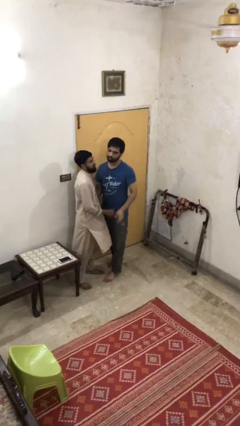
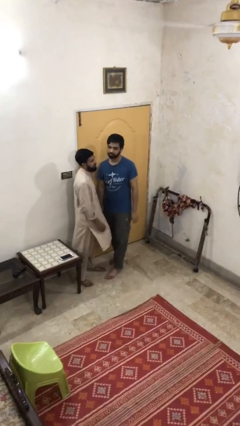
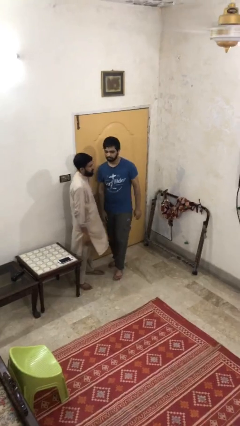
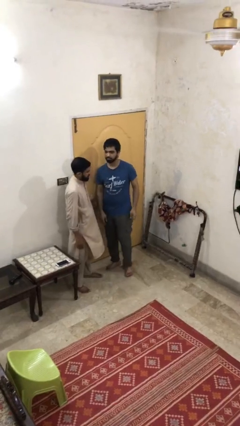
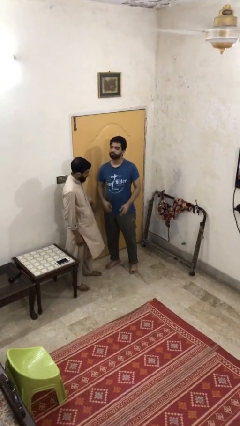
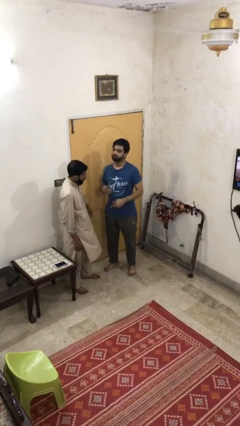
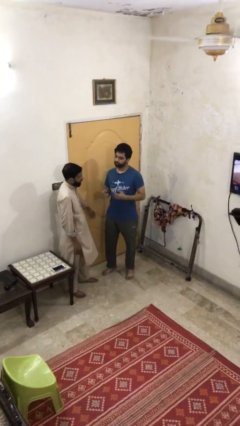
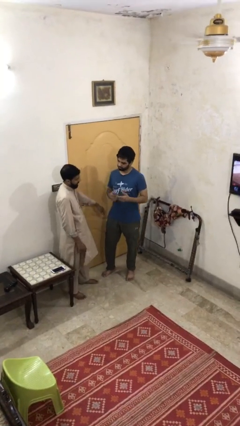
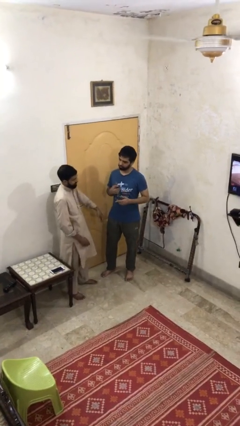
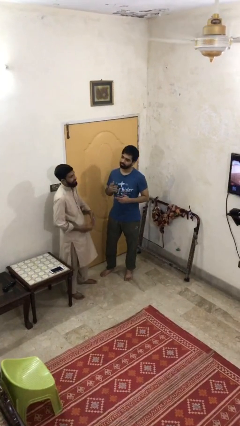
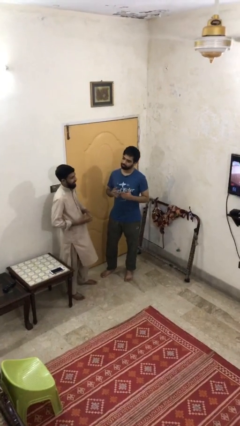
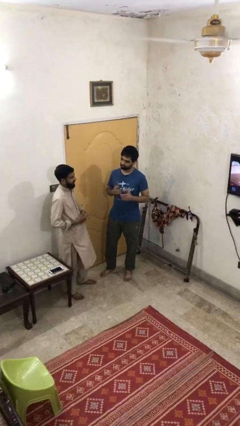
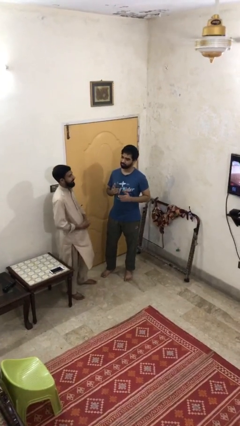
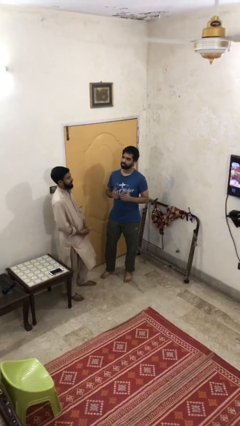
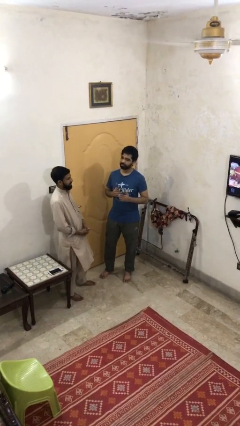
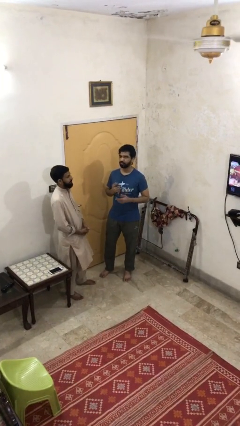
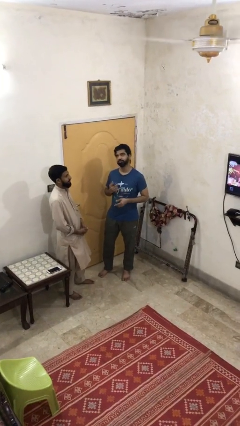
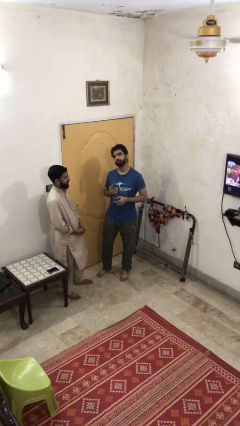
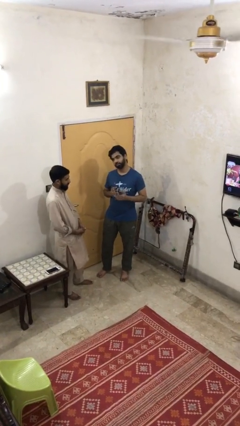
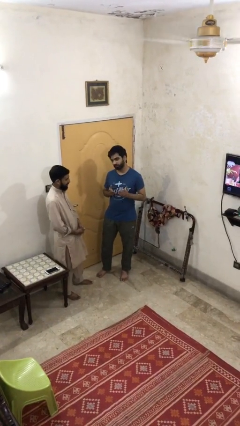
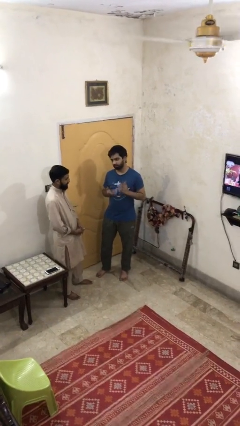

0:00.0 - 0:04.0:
person talks to person

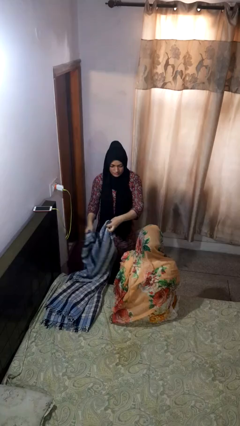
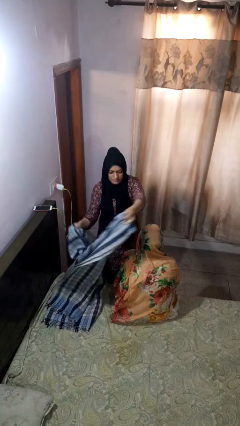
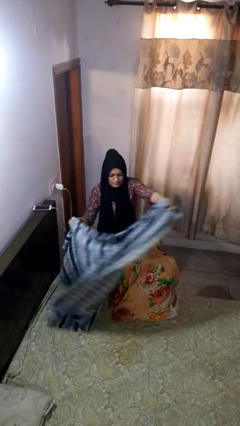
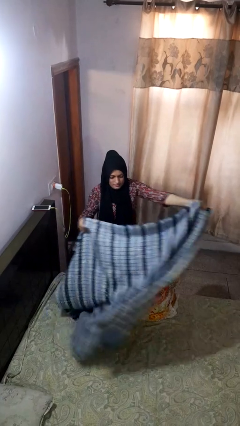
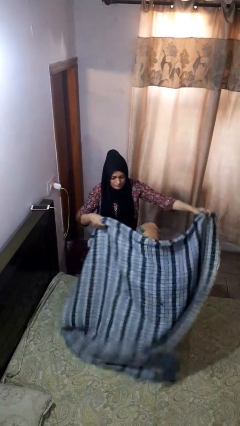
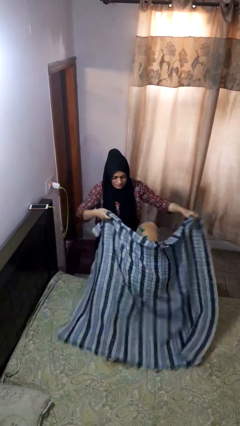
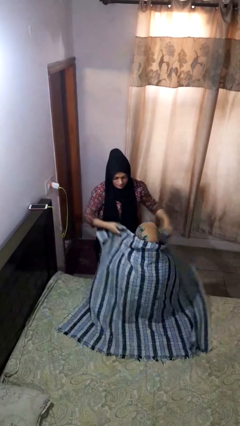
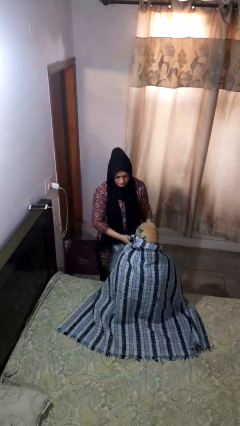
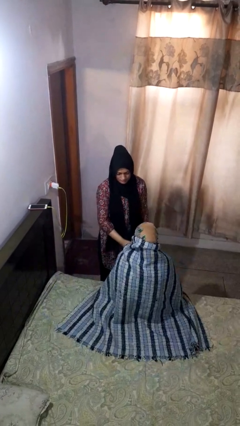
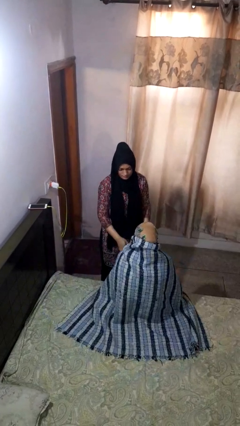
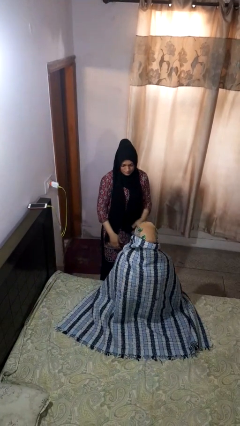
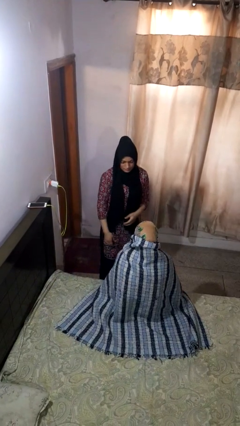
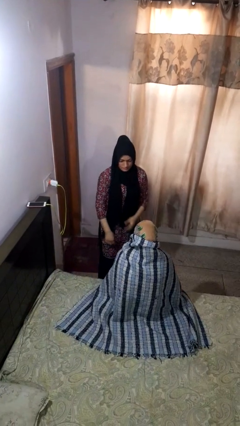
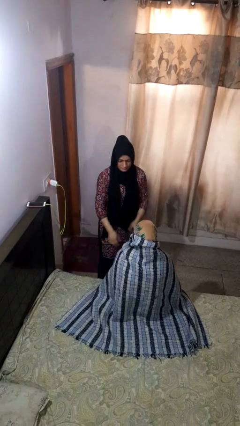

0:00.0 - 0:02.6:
person covers friend with blanket

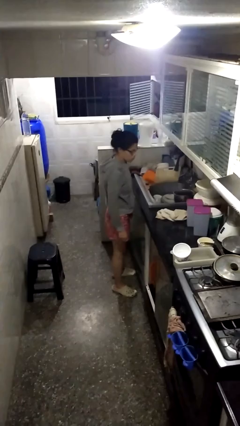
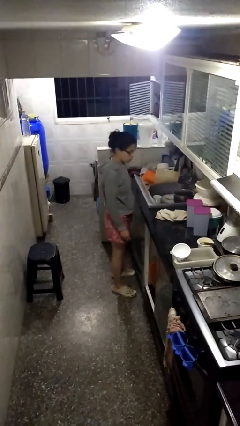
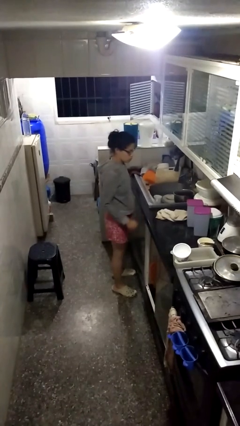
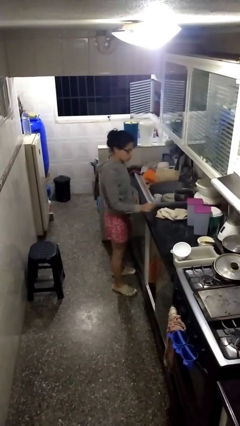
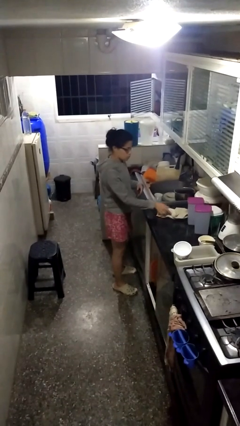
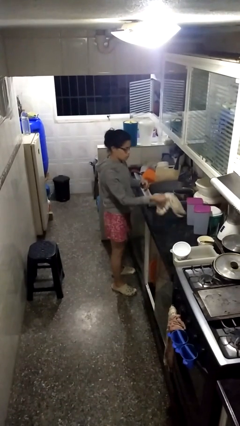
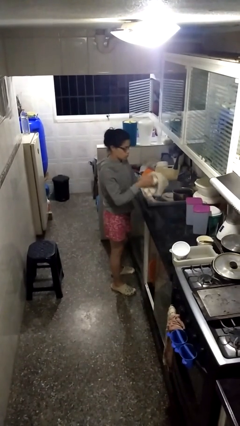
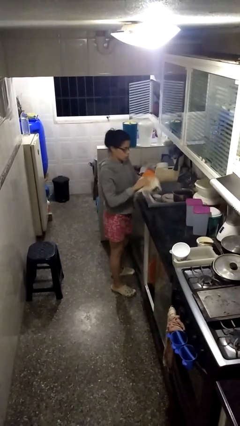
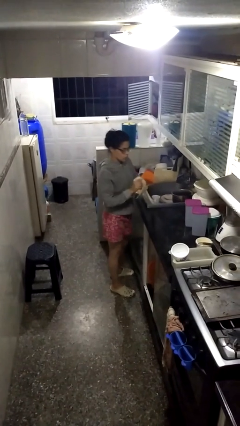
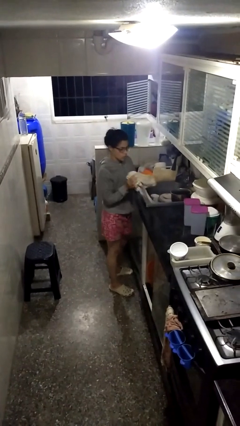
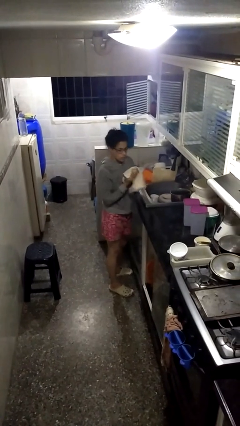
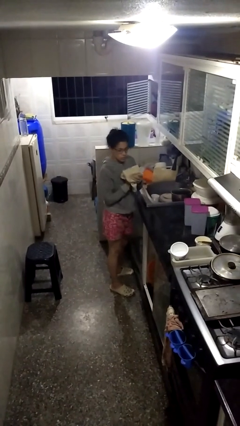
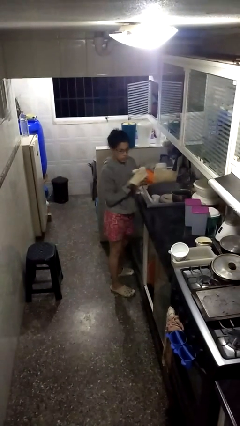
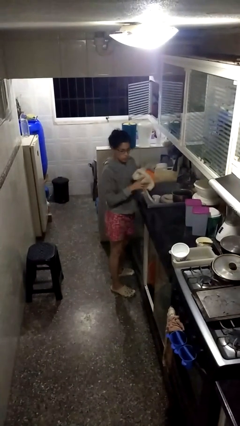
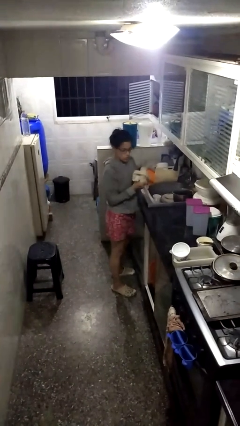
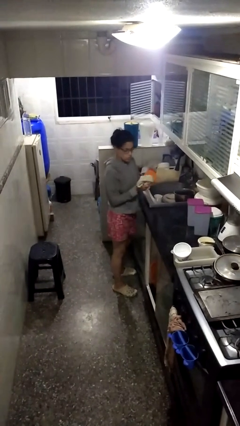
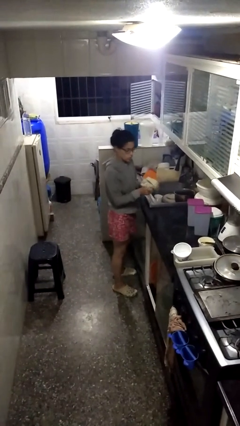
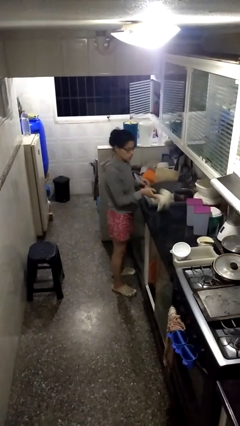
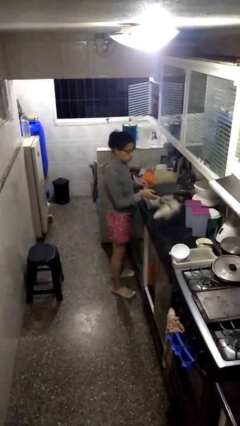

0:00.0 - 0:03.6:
person dries hands with towel

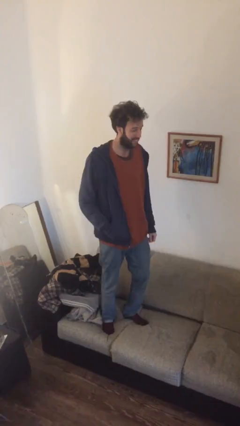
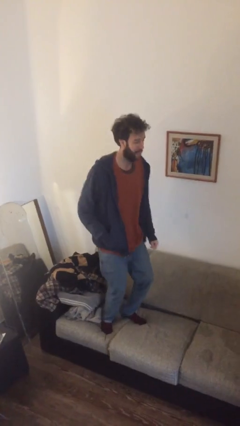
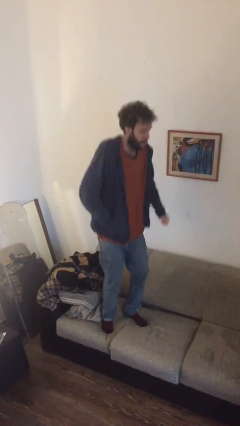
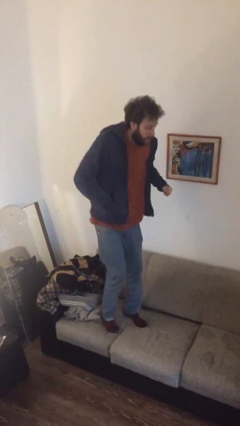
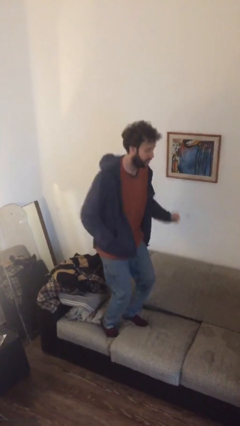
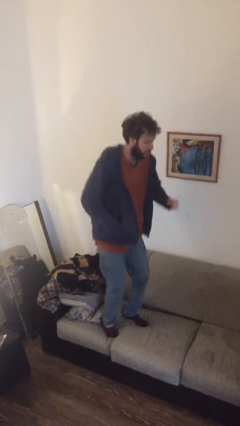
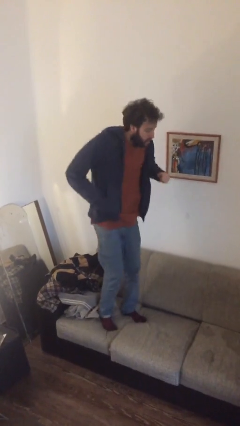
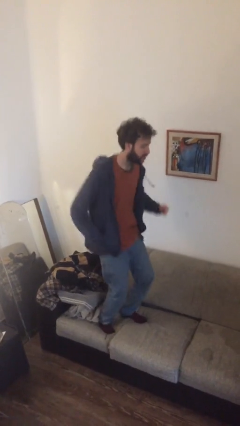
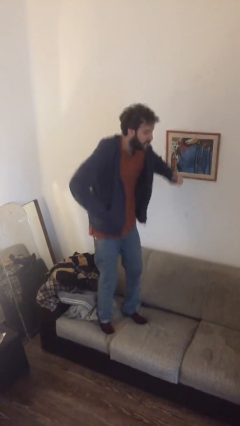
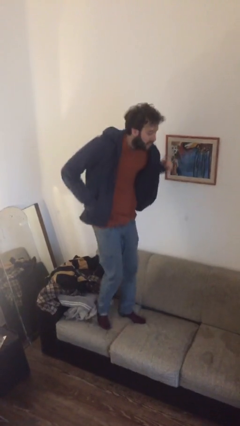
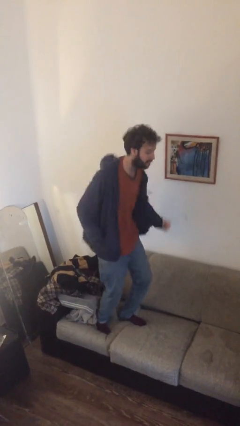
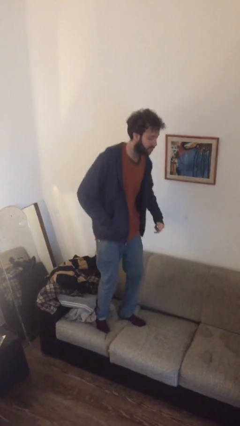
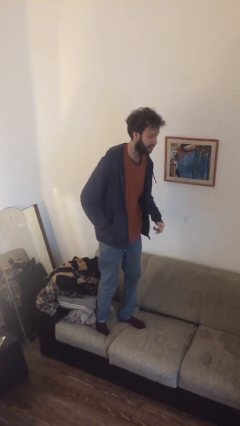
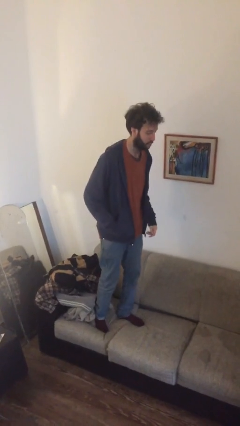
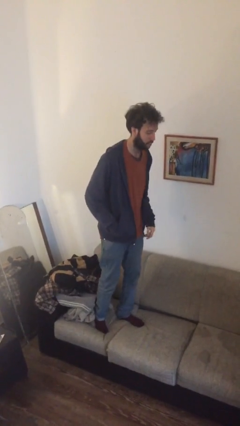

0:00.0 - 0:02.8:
person jumps on couch

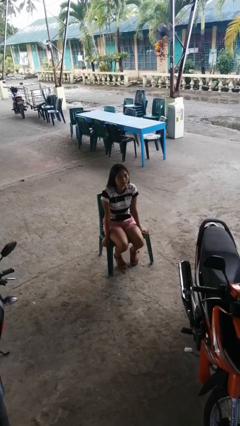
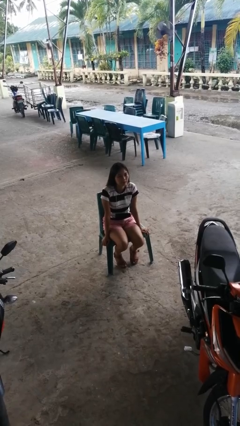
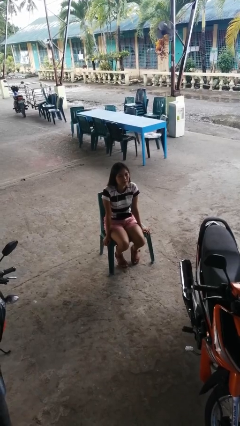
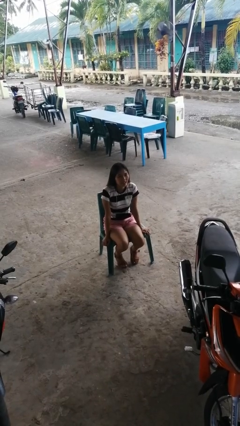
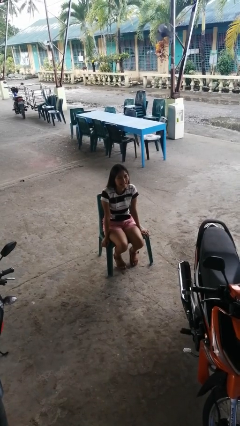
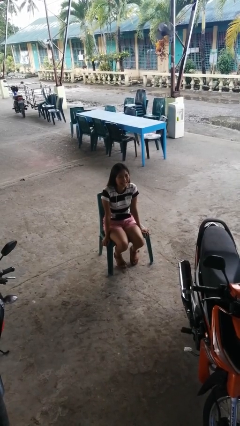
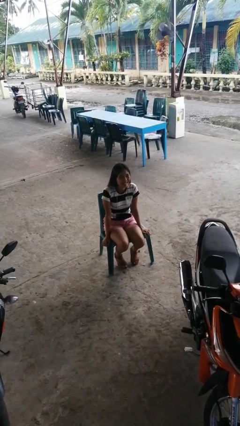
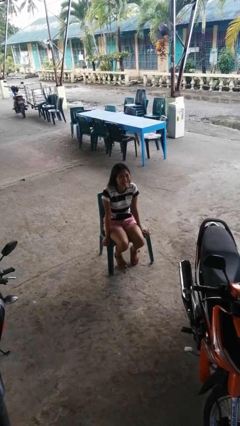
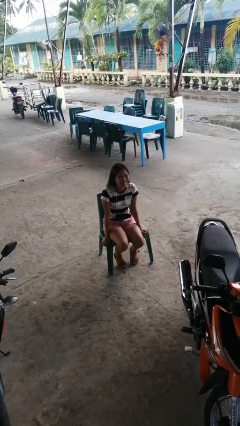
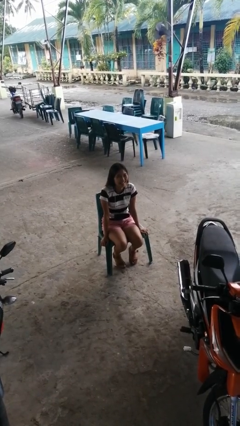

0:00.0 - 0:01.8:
person sticks out tongue

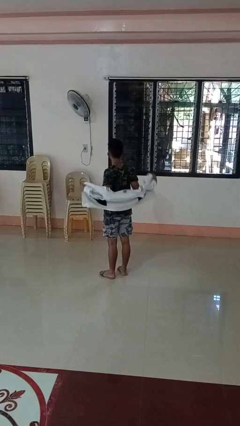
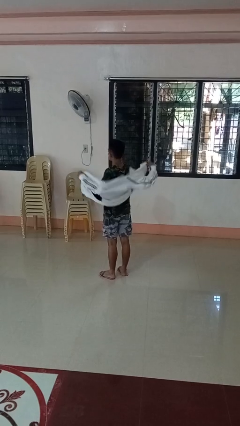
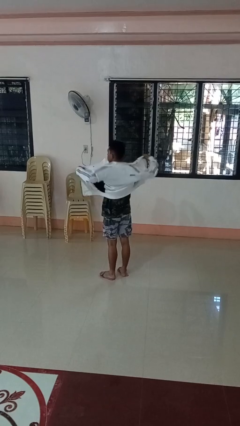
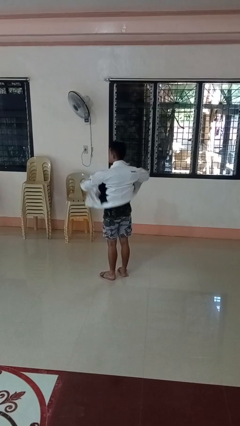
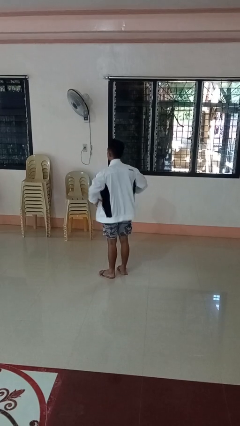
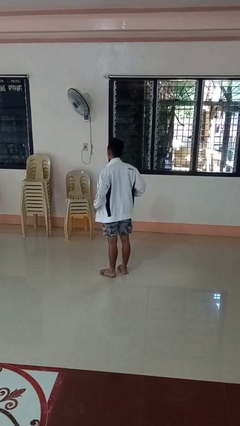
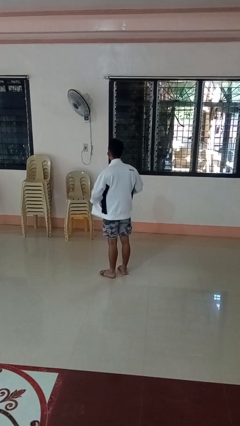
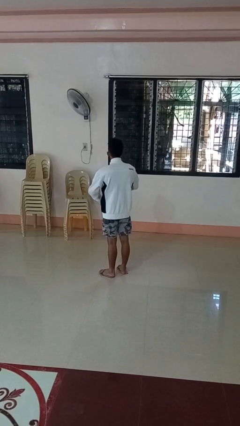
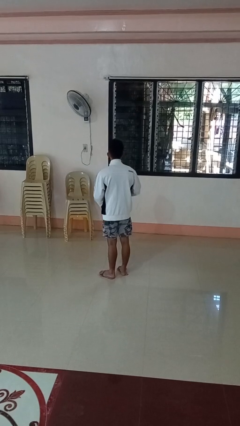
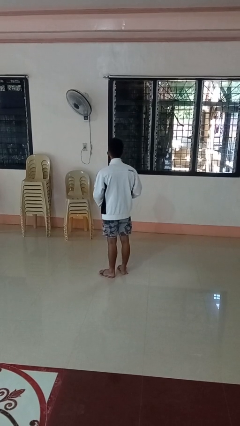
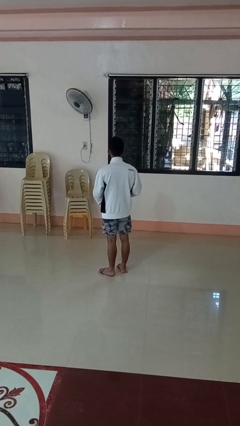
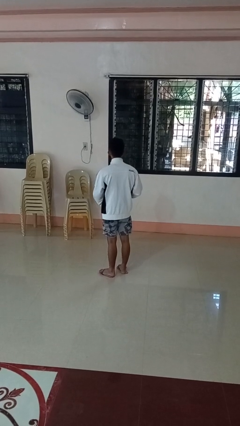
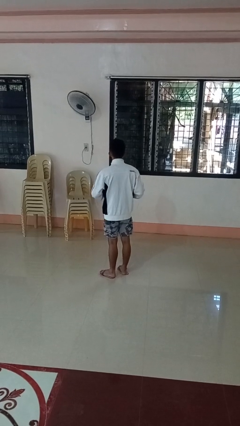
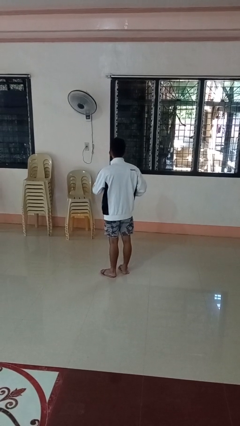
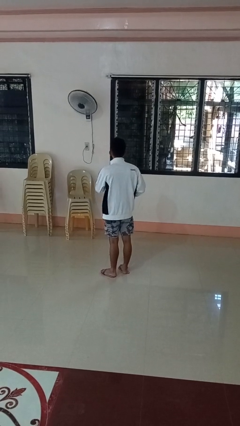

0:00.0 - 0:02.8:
person puts on jacket
